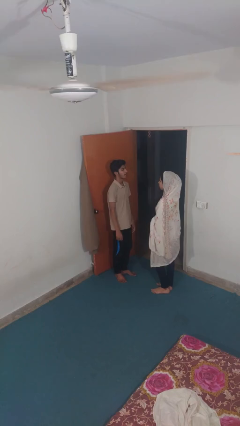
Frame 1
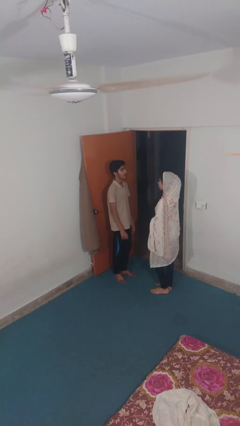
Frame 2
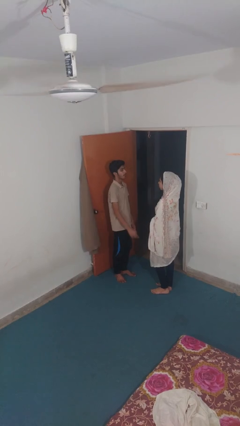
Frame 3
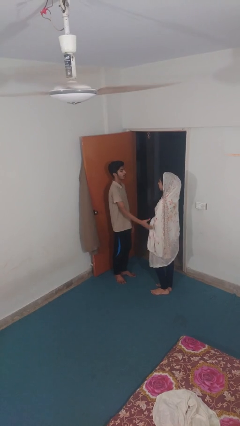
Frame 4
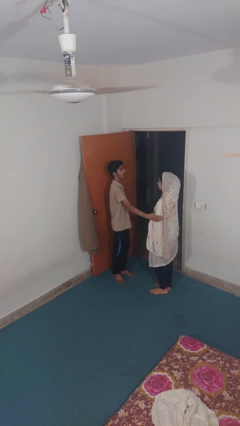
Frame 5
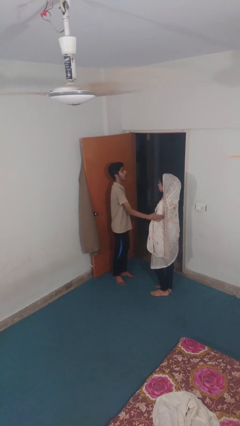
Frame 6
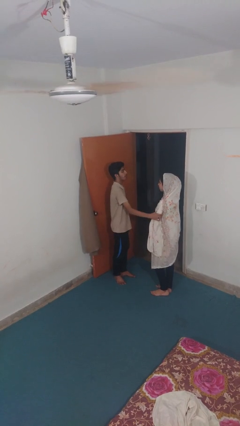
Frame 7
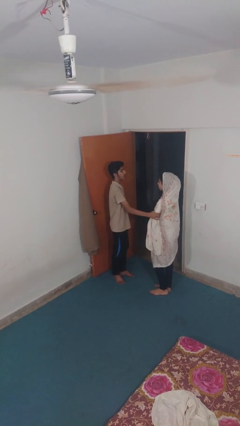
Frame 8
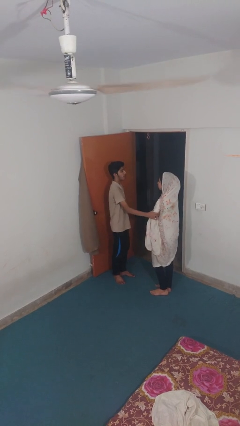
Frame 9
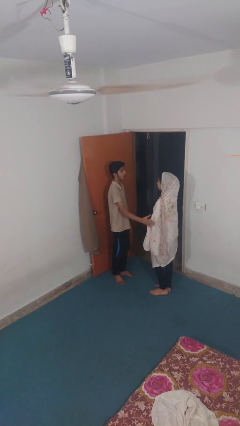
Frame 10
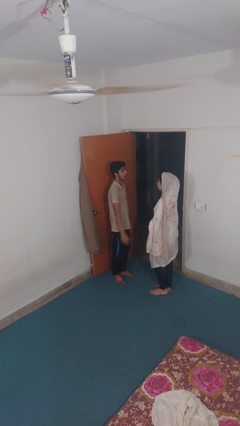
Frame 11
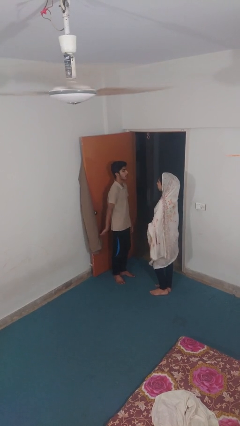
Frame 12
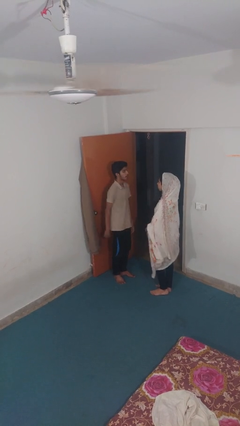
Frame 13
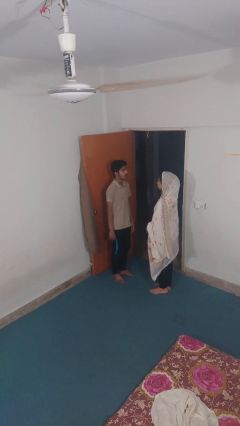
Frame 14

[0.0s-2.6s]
person grabs person by bicep

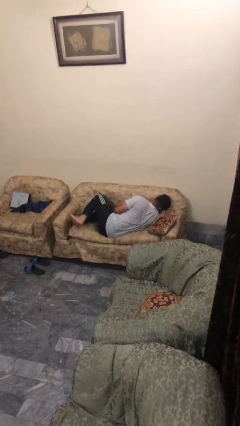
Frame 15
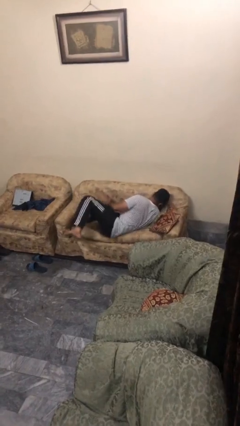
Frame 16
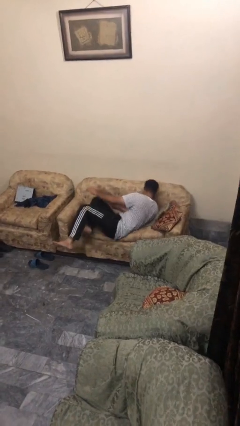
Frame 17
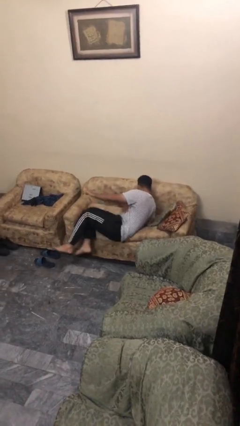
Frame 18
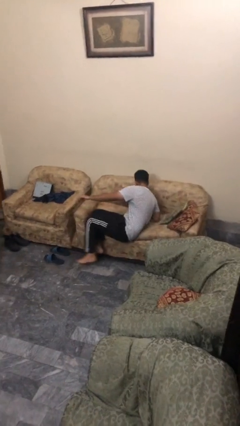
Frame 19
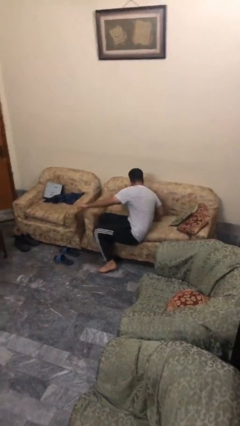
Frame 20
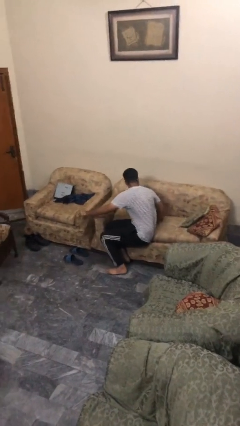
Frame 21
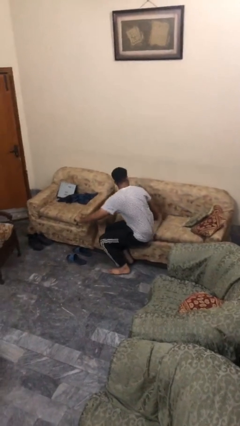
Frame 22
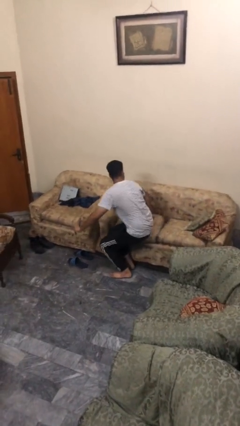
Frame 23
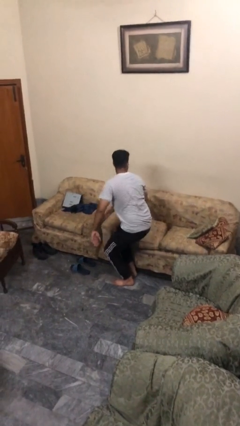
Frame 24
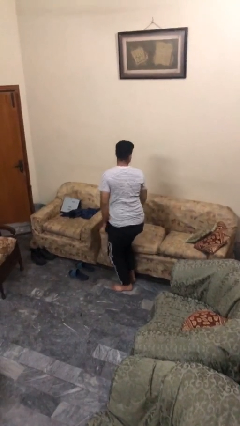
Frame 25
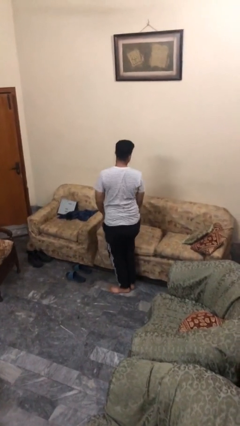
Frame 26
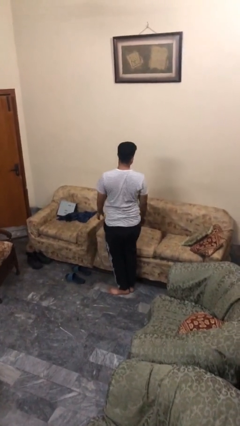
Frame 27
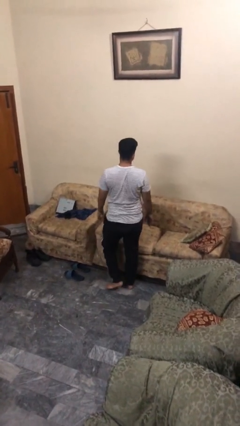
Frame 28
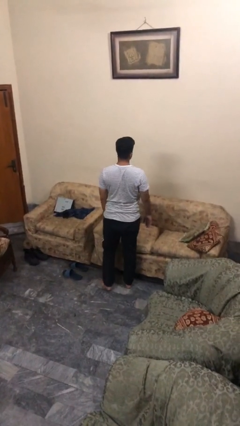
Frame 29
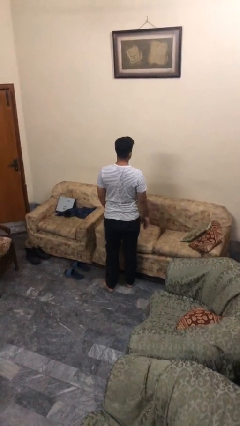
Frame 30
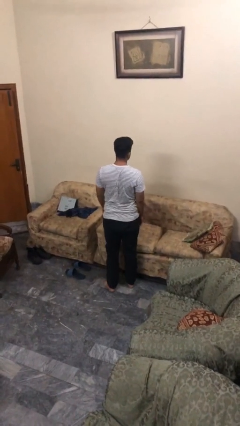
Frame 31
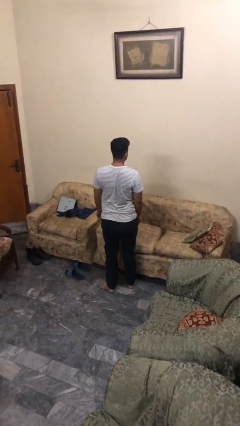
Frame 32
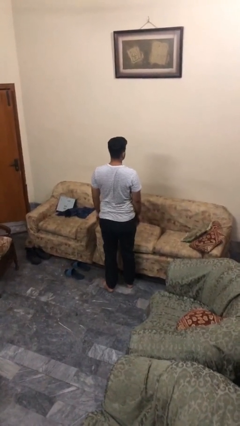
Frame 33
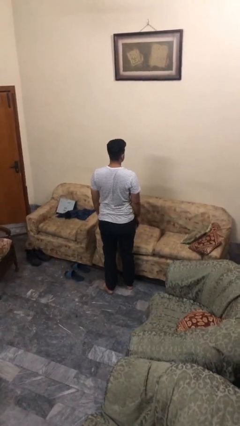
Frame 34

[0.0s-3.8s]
person stands up

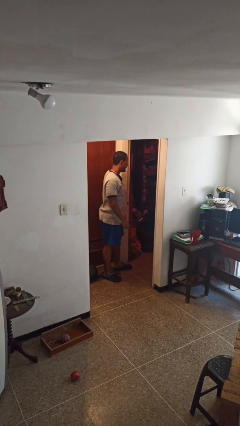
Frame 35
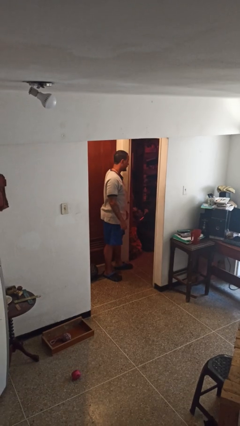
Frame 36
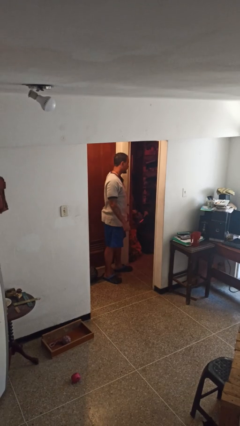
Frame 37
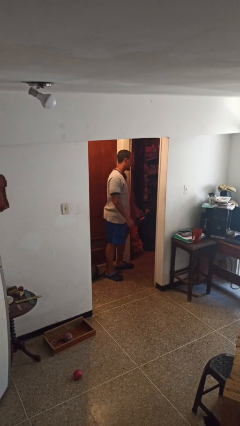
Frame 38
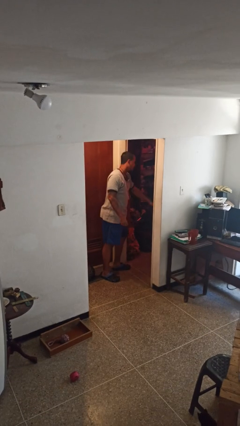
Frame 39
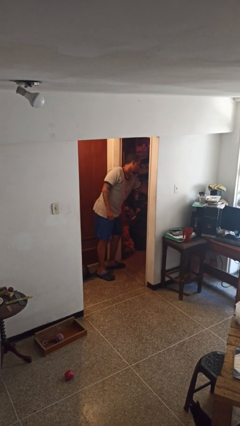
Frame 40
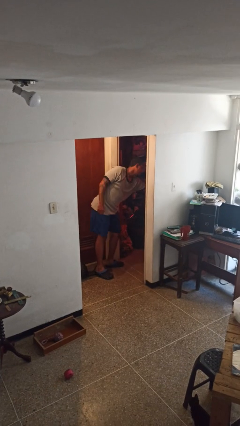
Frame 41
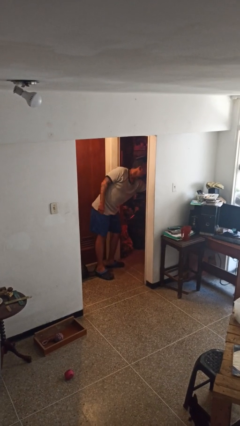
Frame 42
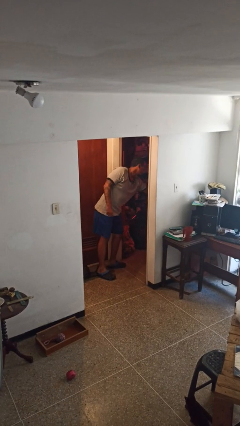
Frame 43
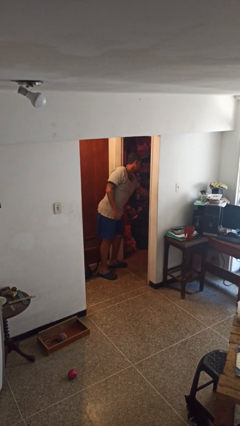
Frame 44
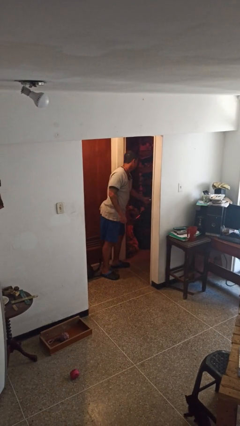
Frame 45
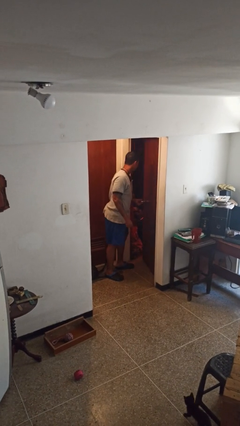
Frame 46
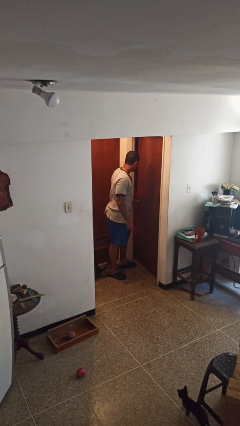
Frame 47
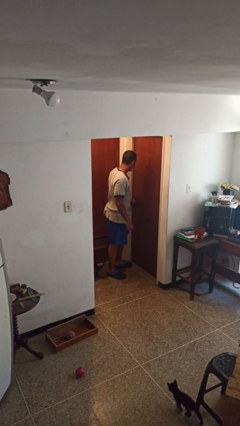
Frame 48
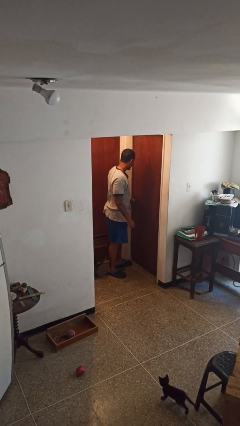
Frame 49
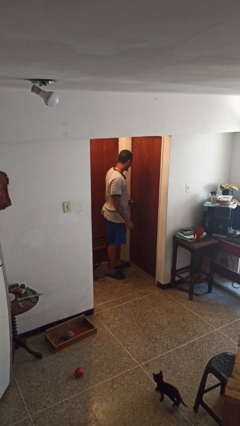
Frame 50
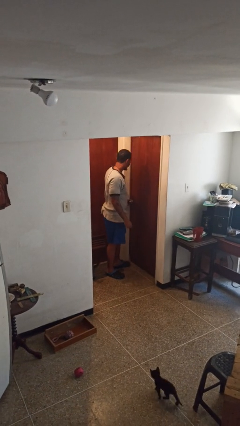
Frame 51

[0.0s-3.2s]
person closes facility door

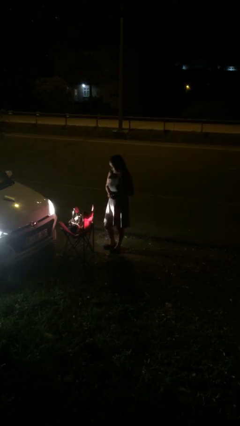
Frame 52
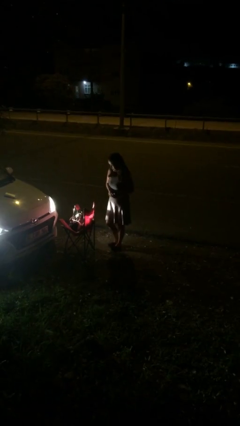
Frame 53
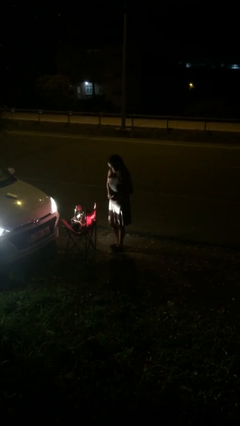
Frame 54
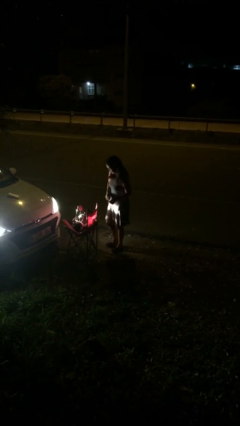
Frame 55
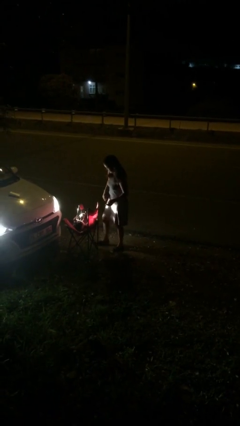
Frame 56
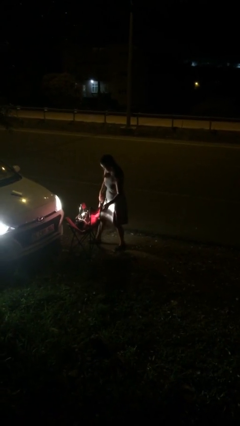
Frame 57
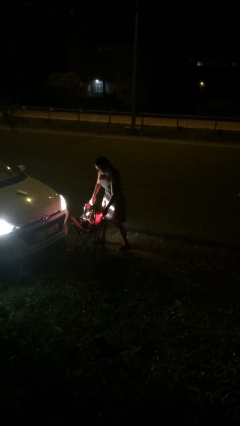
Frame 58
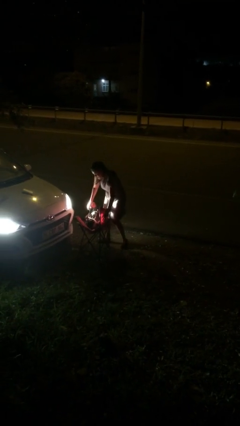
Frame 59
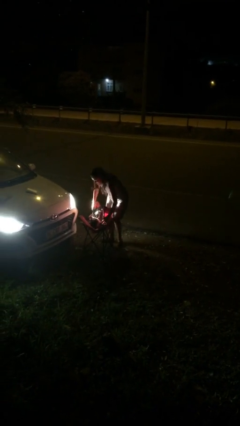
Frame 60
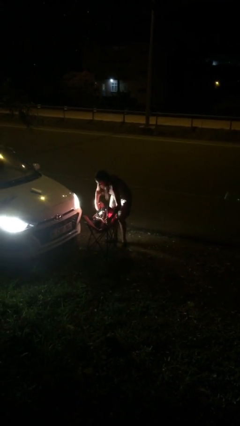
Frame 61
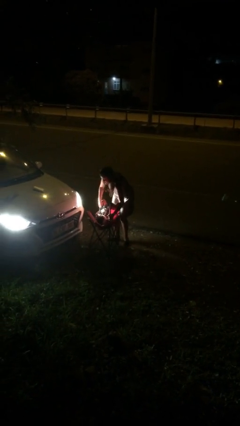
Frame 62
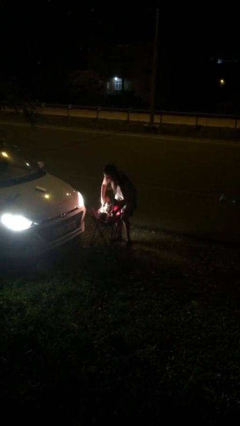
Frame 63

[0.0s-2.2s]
person picks up object from floor

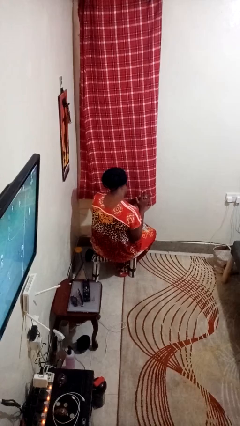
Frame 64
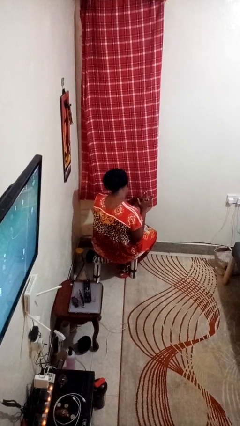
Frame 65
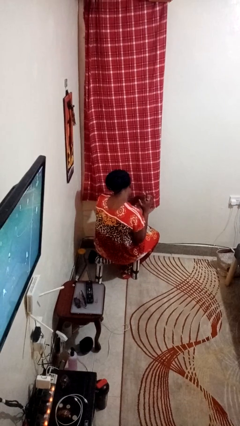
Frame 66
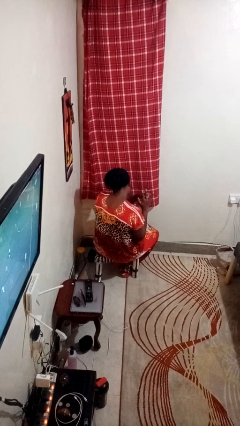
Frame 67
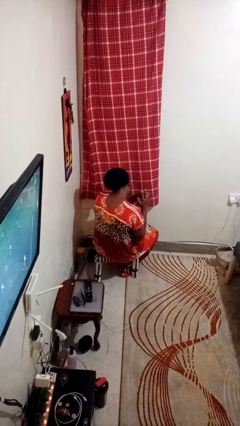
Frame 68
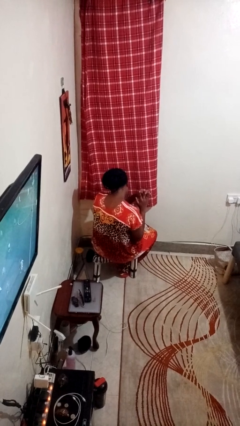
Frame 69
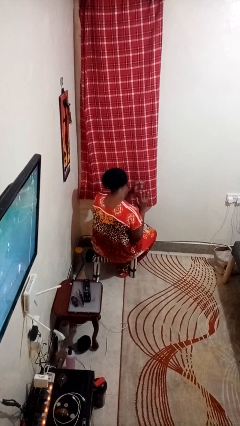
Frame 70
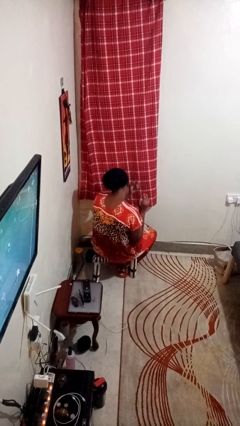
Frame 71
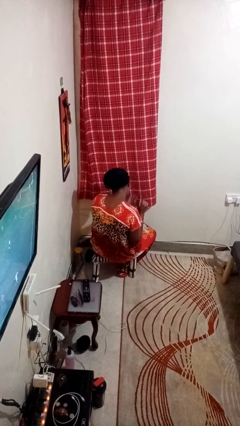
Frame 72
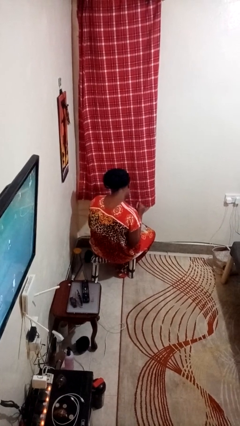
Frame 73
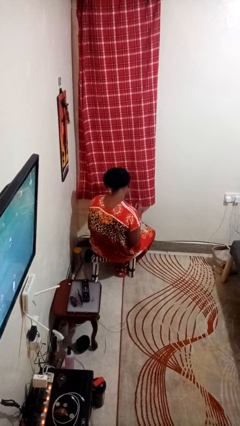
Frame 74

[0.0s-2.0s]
person takes off ring

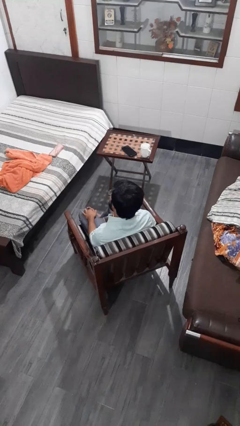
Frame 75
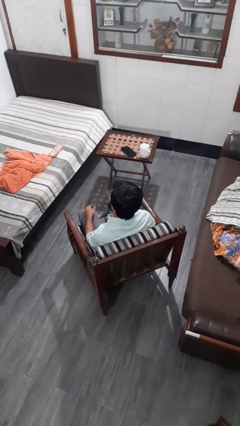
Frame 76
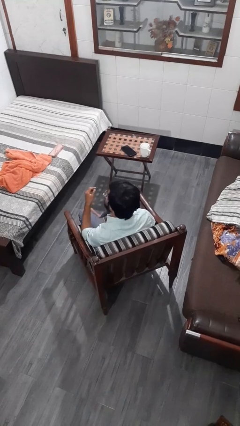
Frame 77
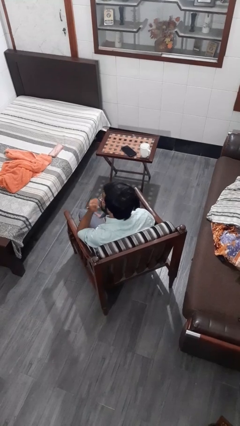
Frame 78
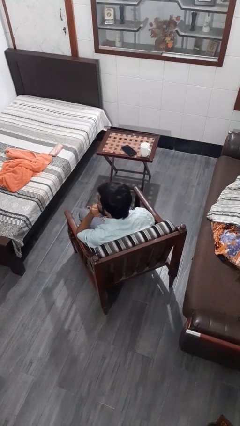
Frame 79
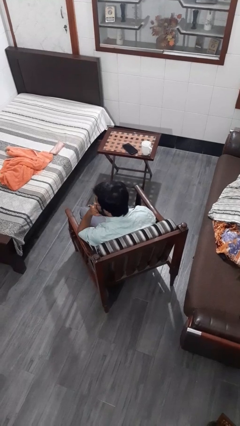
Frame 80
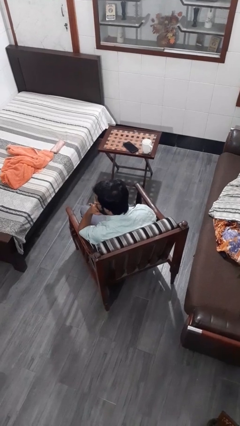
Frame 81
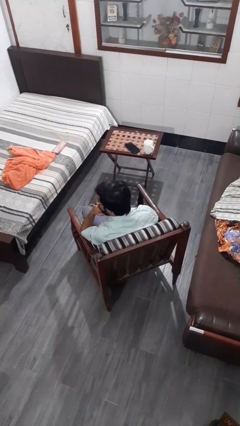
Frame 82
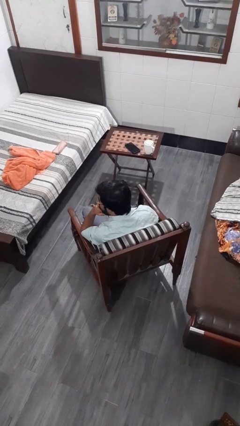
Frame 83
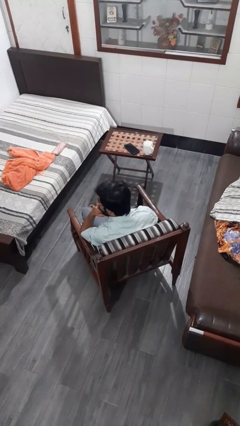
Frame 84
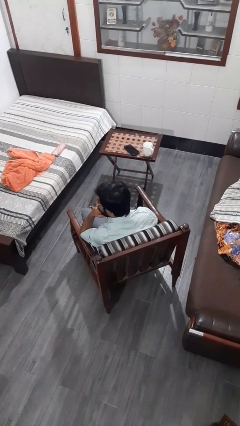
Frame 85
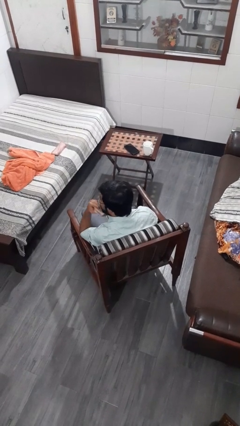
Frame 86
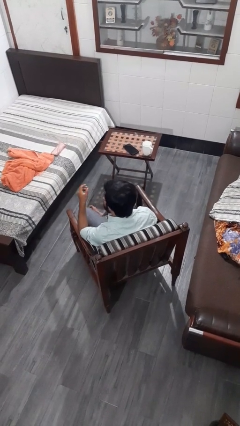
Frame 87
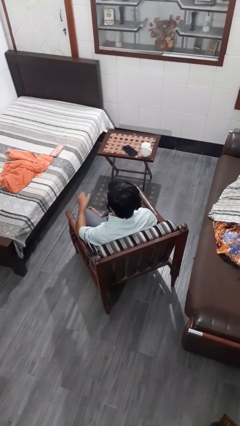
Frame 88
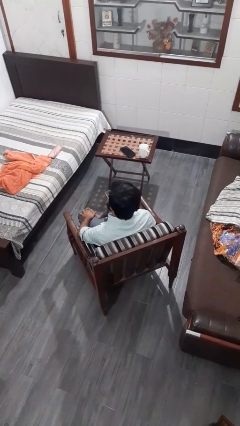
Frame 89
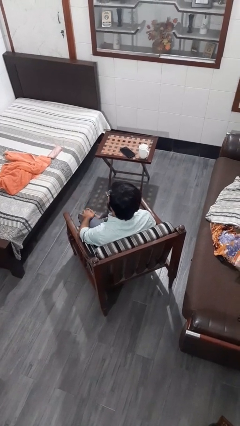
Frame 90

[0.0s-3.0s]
person strokes chin
